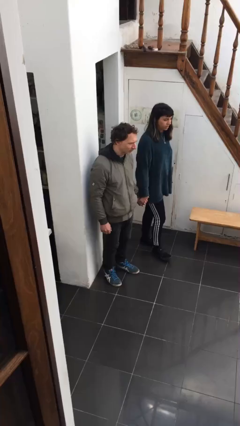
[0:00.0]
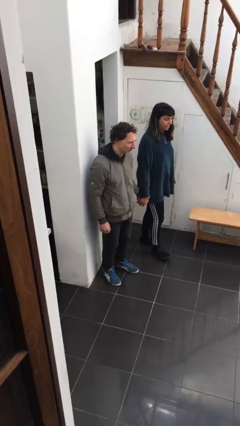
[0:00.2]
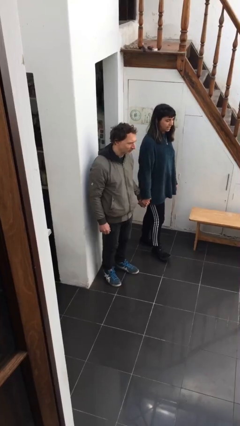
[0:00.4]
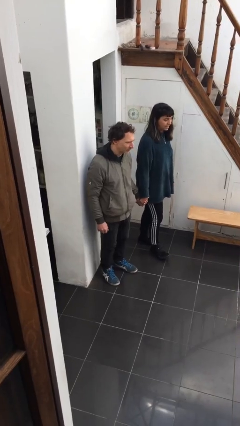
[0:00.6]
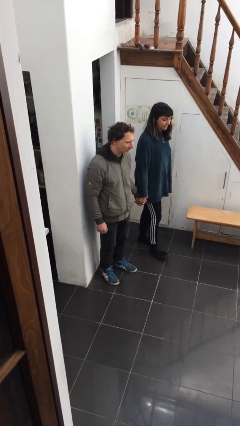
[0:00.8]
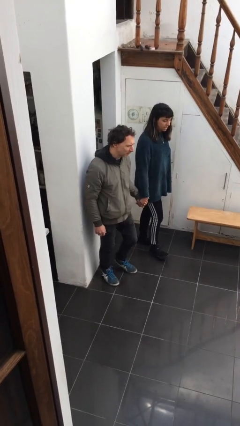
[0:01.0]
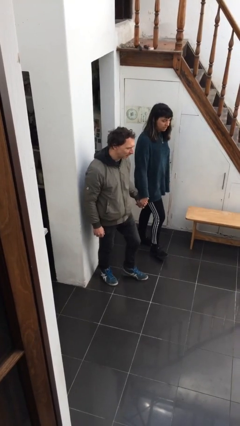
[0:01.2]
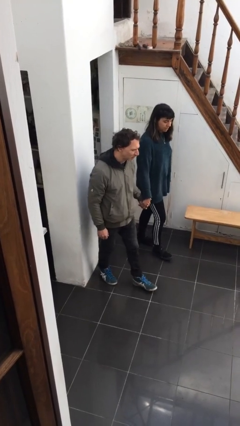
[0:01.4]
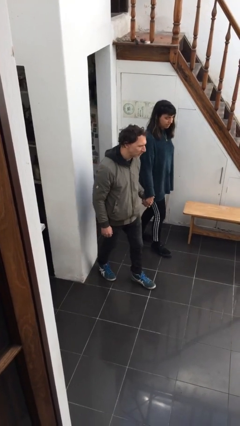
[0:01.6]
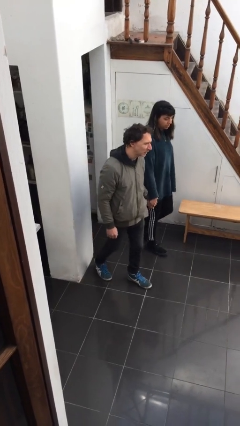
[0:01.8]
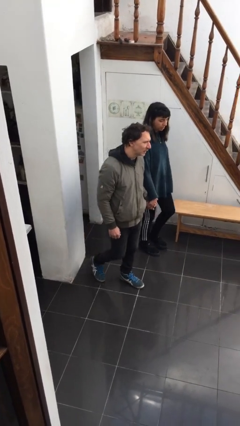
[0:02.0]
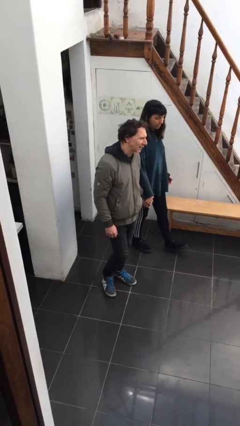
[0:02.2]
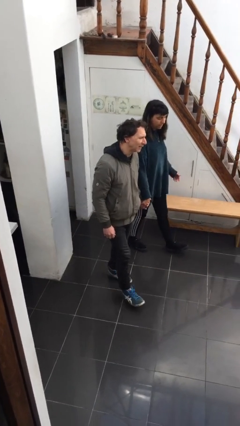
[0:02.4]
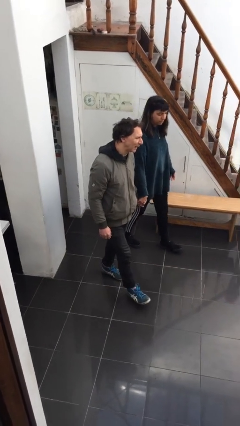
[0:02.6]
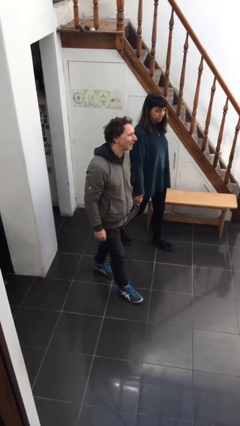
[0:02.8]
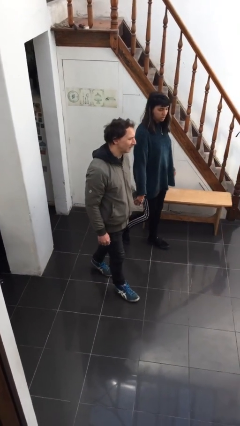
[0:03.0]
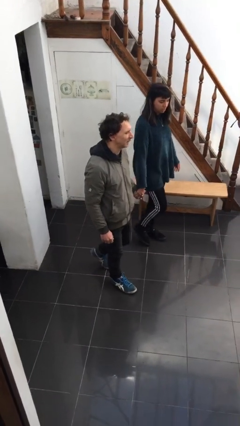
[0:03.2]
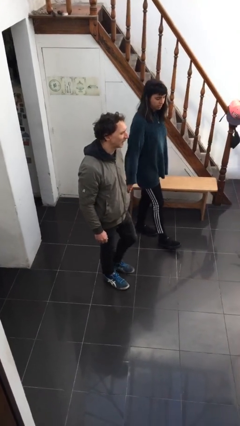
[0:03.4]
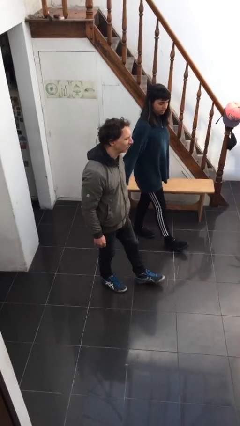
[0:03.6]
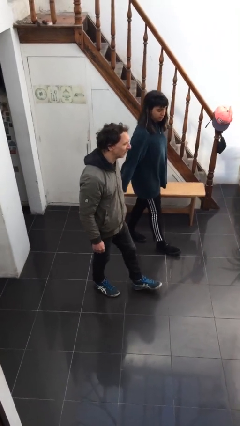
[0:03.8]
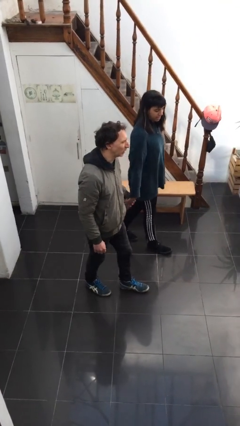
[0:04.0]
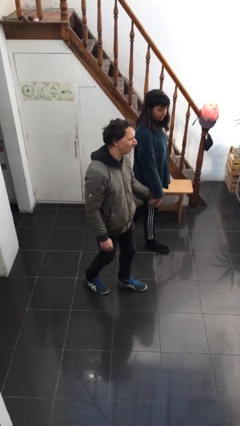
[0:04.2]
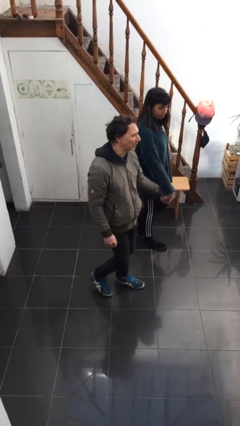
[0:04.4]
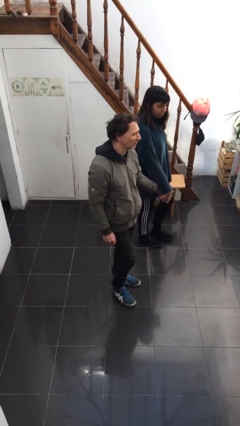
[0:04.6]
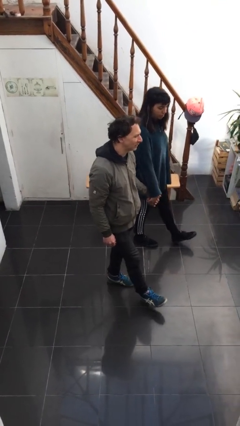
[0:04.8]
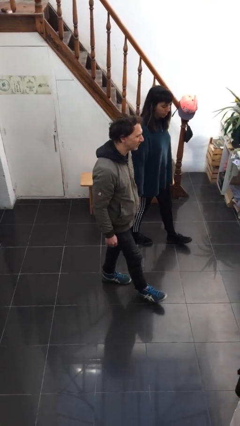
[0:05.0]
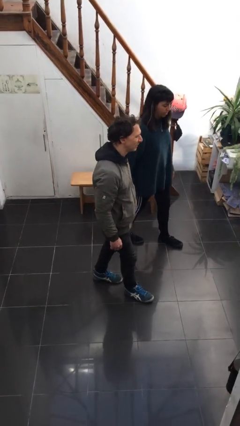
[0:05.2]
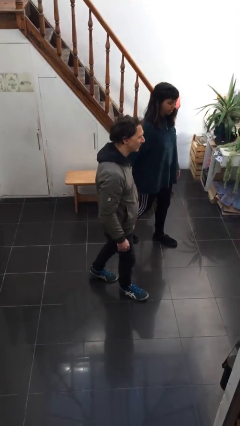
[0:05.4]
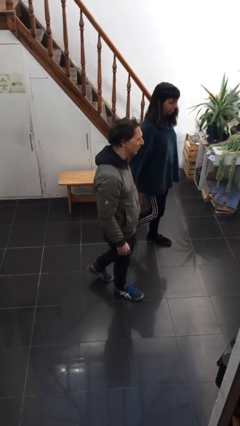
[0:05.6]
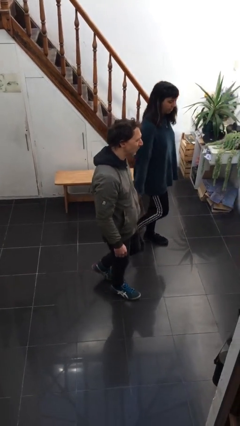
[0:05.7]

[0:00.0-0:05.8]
person holds hand

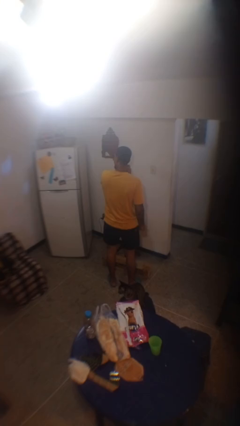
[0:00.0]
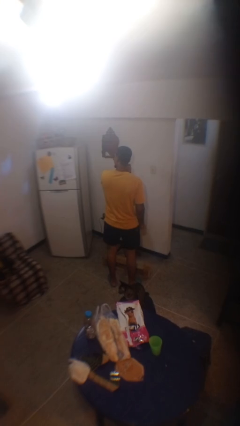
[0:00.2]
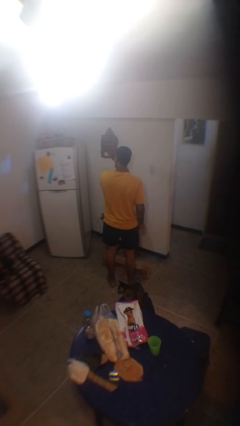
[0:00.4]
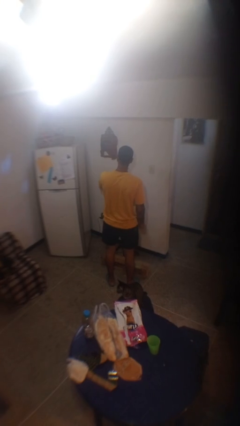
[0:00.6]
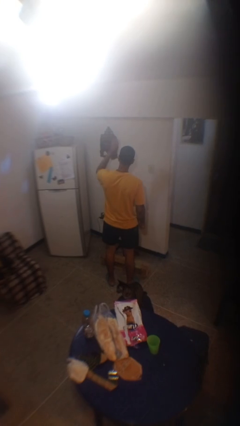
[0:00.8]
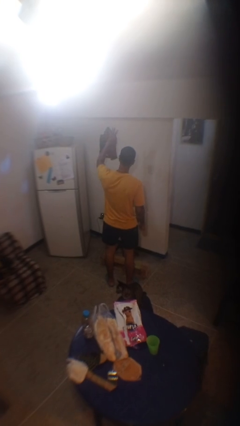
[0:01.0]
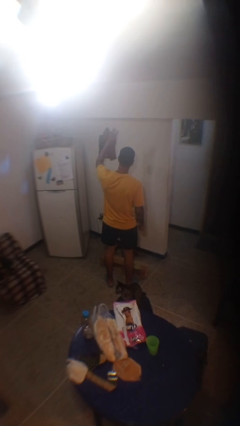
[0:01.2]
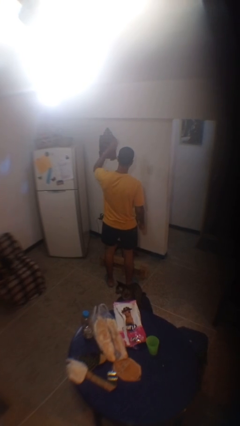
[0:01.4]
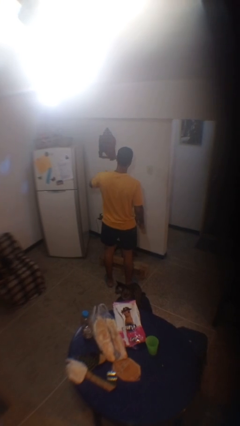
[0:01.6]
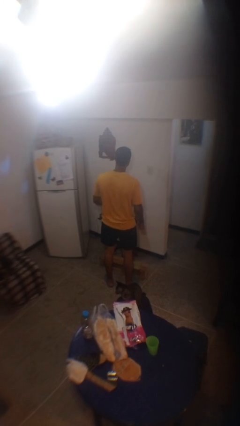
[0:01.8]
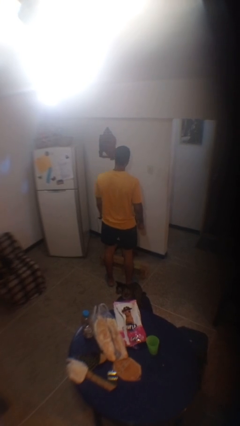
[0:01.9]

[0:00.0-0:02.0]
person gestures number four

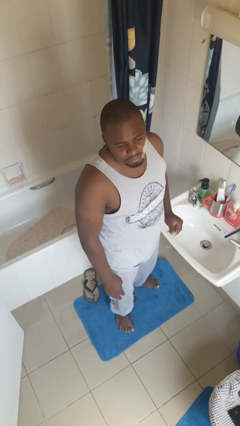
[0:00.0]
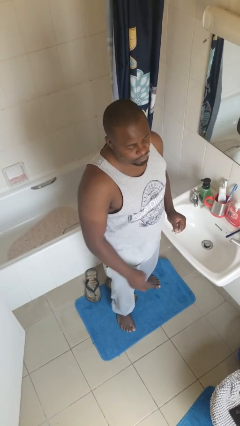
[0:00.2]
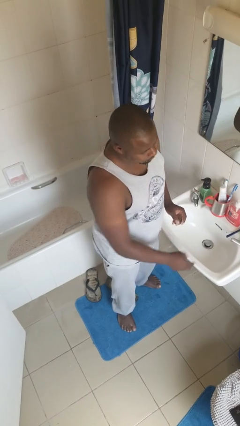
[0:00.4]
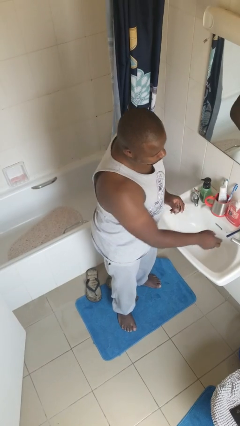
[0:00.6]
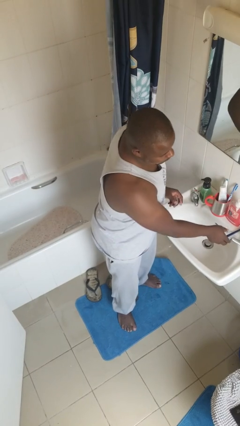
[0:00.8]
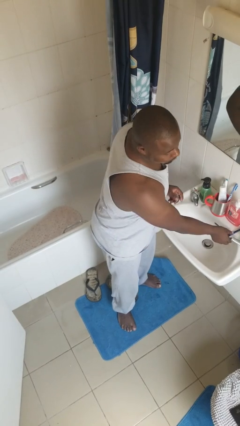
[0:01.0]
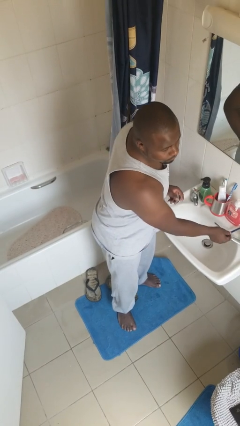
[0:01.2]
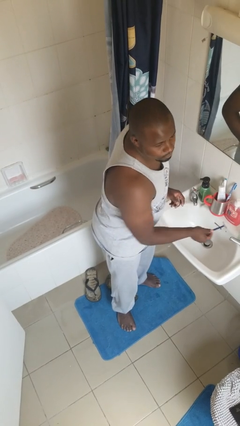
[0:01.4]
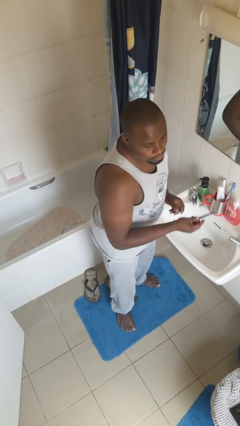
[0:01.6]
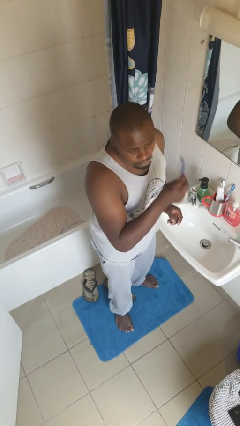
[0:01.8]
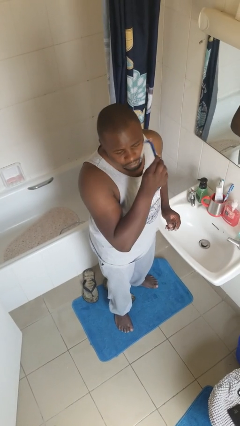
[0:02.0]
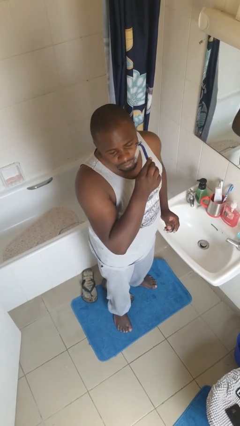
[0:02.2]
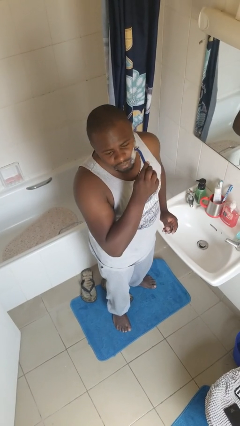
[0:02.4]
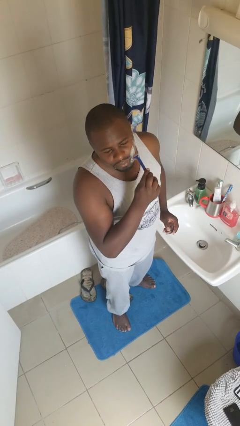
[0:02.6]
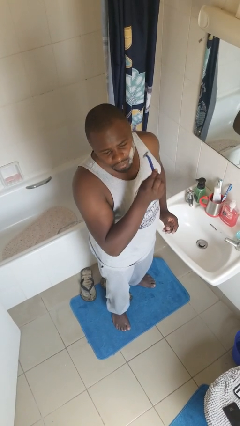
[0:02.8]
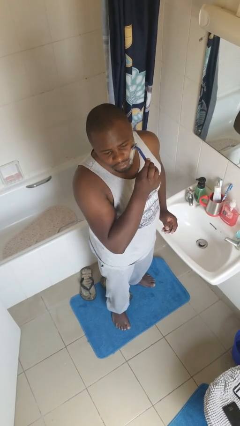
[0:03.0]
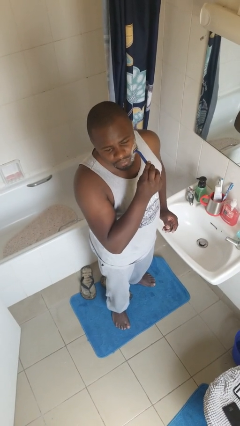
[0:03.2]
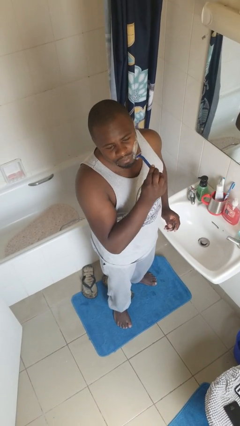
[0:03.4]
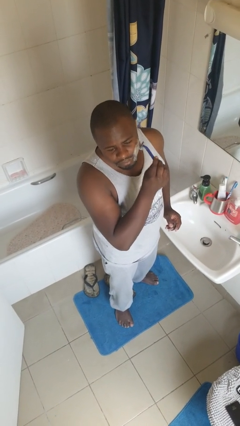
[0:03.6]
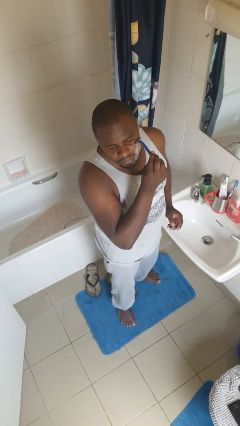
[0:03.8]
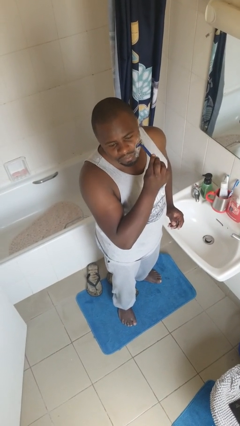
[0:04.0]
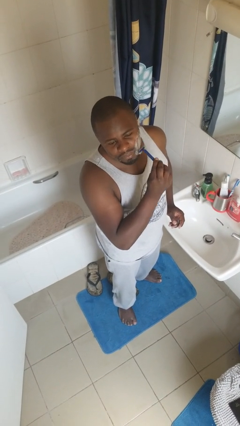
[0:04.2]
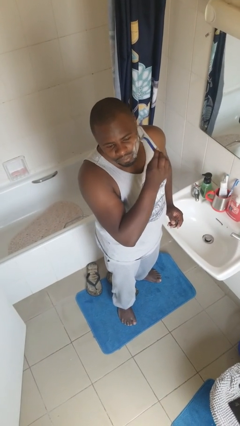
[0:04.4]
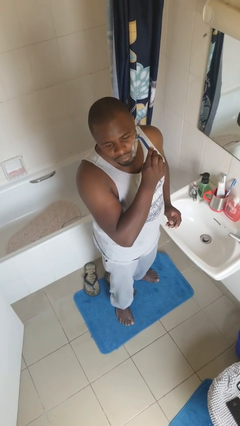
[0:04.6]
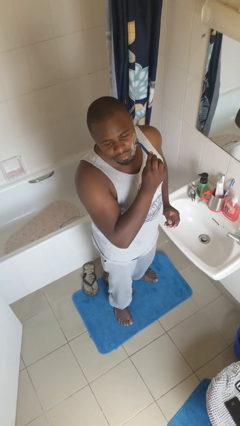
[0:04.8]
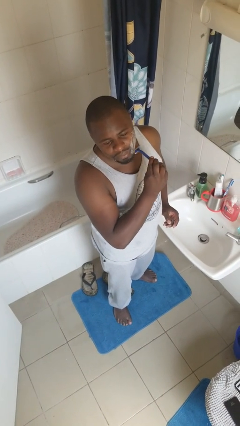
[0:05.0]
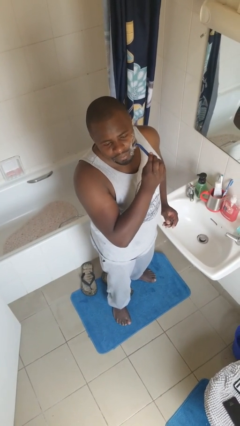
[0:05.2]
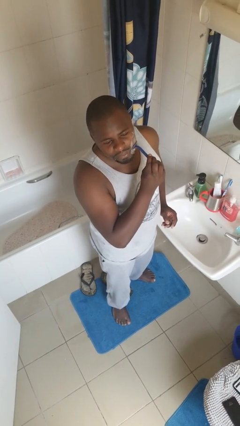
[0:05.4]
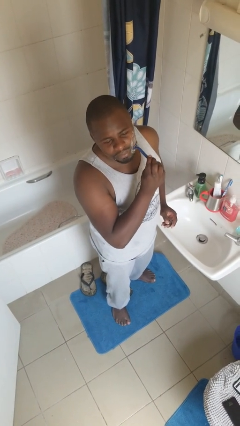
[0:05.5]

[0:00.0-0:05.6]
person shaves face

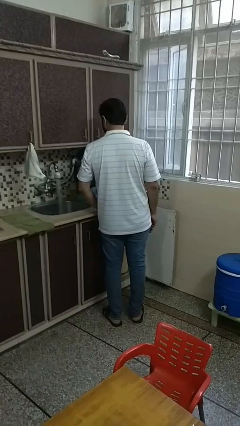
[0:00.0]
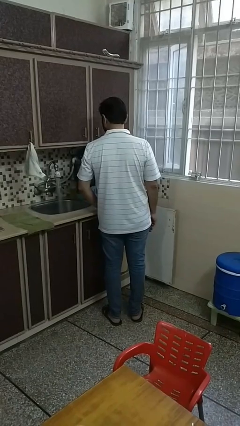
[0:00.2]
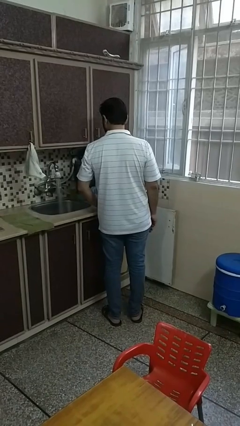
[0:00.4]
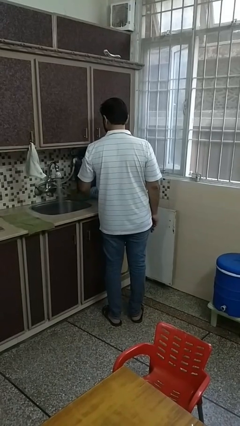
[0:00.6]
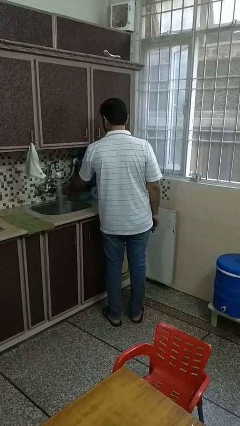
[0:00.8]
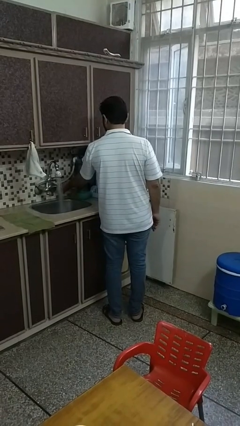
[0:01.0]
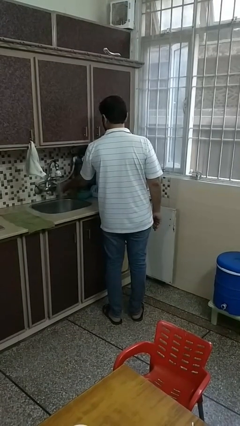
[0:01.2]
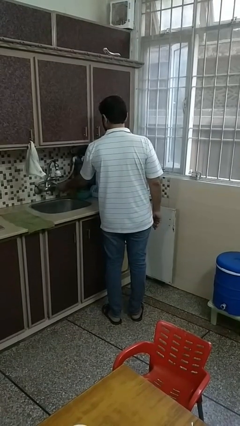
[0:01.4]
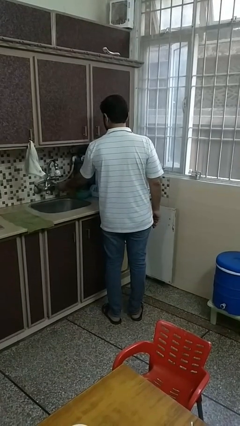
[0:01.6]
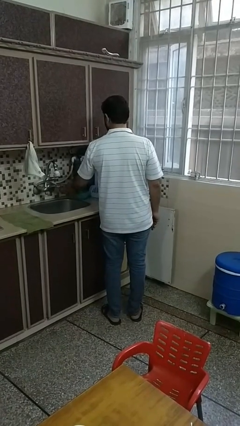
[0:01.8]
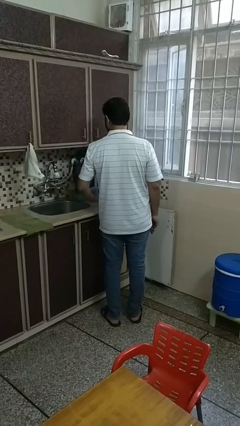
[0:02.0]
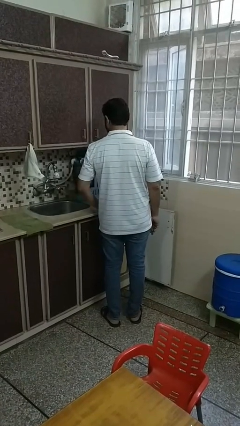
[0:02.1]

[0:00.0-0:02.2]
person turns off faucet

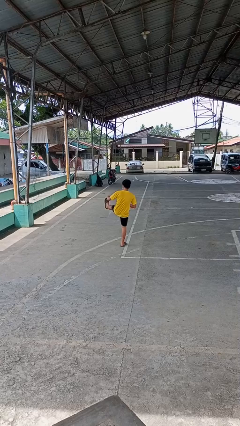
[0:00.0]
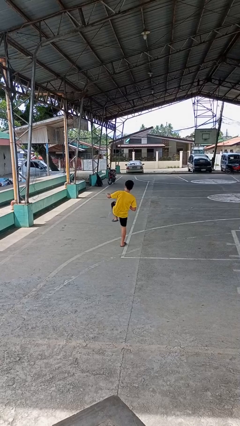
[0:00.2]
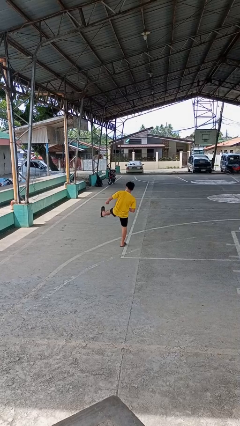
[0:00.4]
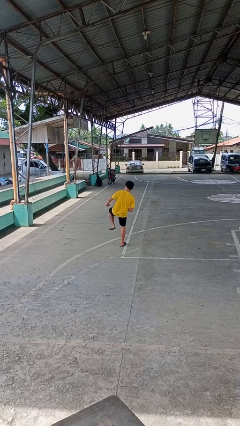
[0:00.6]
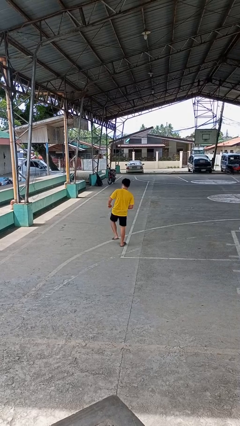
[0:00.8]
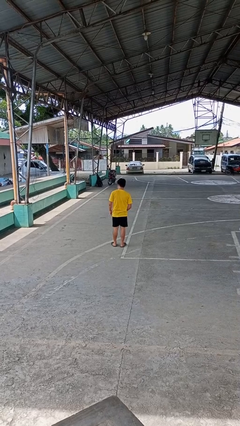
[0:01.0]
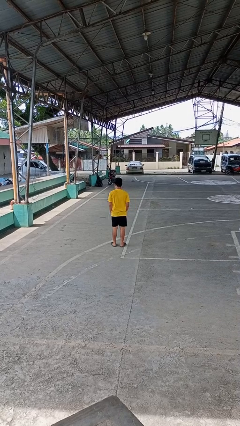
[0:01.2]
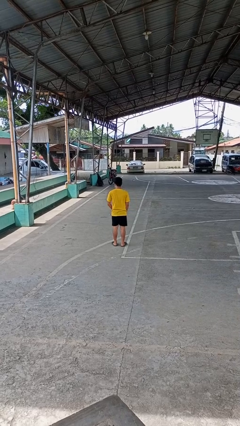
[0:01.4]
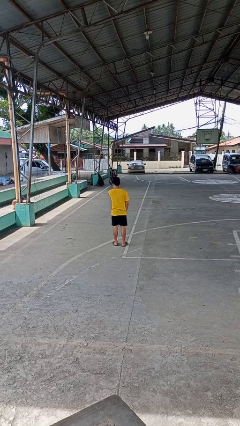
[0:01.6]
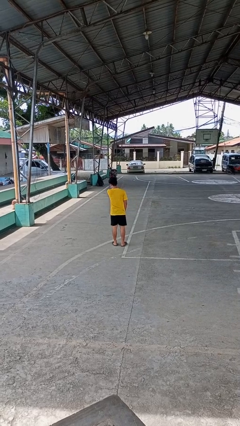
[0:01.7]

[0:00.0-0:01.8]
person karate kicks
